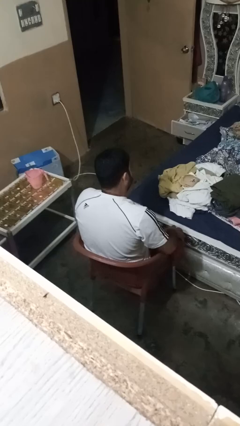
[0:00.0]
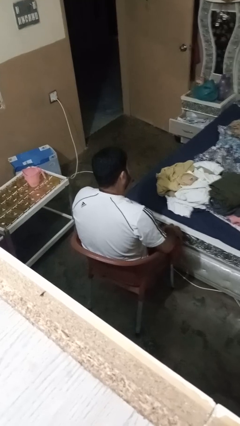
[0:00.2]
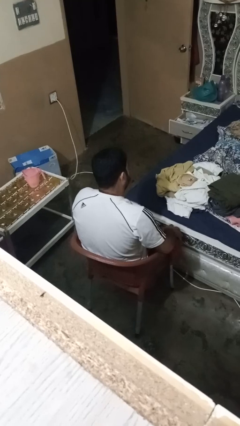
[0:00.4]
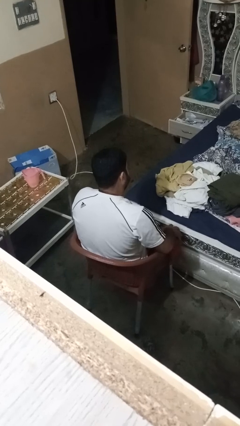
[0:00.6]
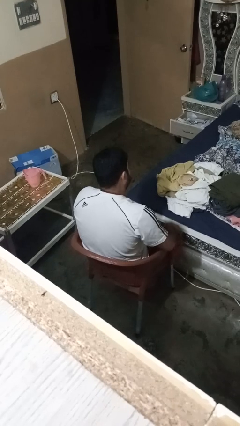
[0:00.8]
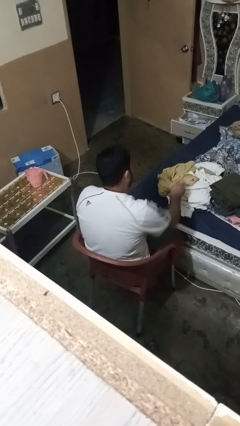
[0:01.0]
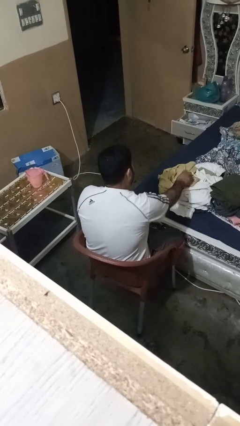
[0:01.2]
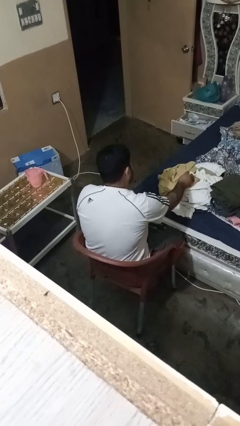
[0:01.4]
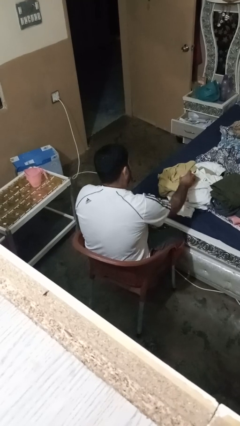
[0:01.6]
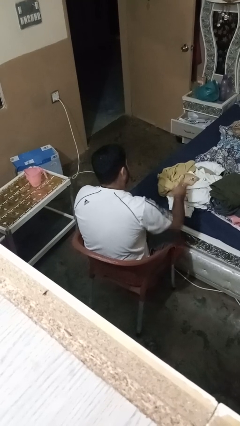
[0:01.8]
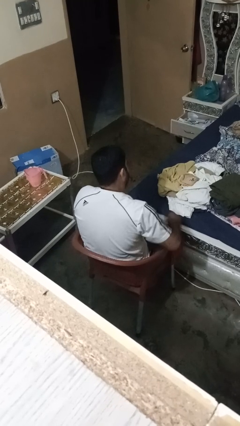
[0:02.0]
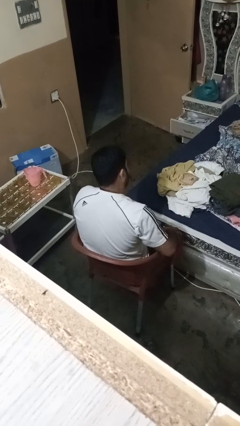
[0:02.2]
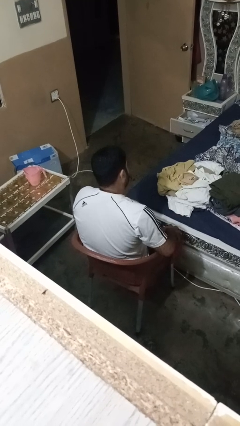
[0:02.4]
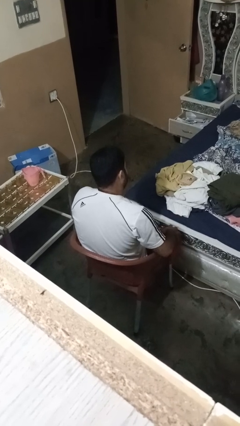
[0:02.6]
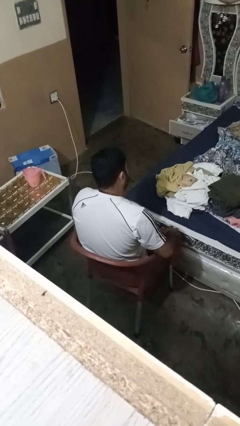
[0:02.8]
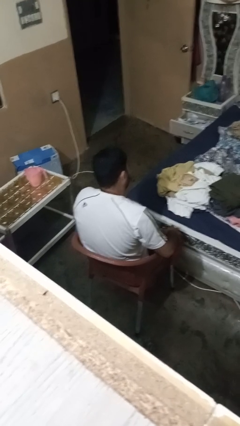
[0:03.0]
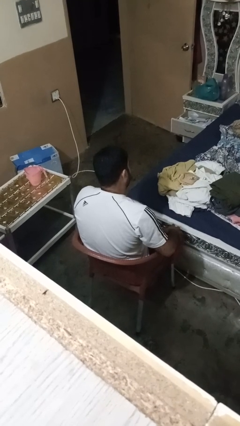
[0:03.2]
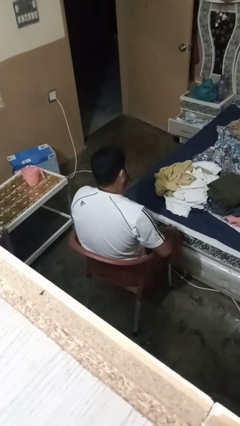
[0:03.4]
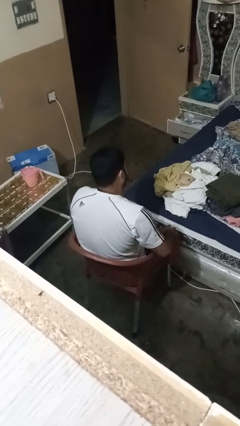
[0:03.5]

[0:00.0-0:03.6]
person folds socks

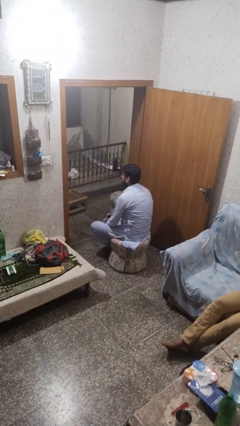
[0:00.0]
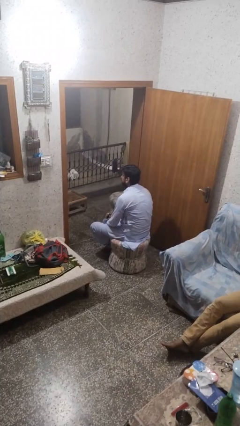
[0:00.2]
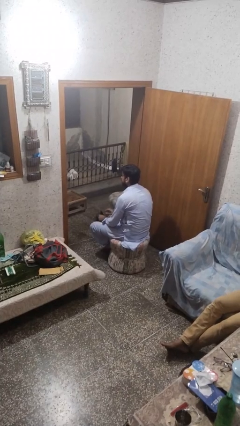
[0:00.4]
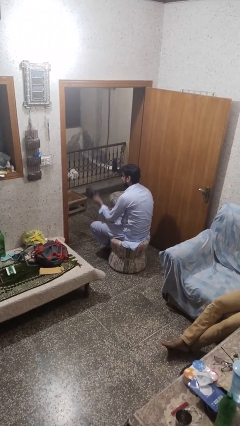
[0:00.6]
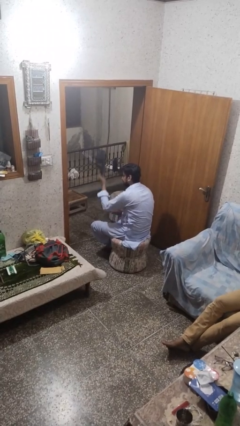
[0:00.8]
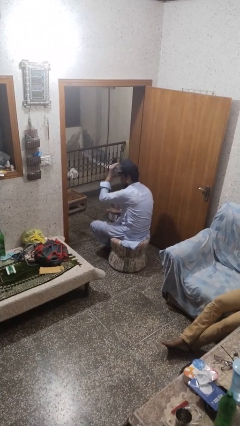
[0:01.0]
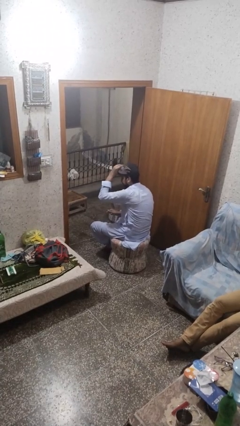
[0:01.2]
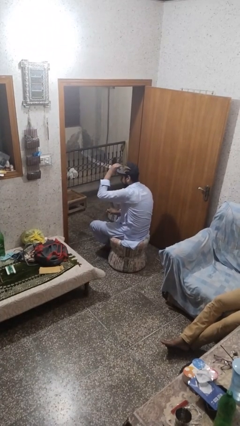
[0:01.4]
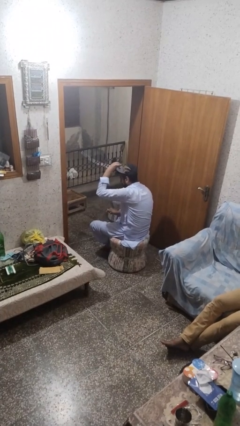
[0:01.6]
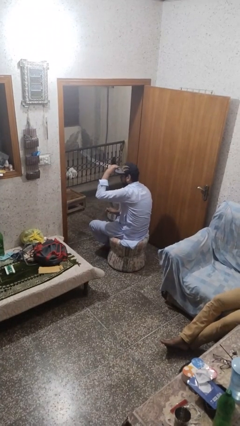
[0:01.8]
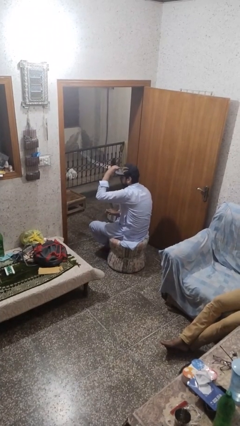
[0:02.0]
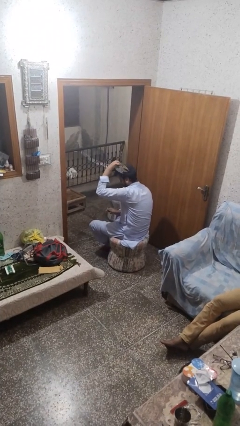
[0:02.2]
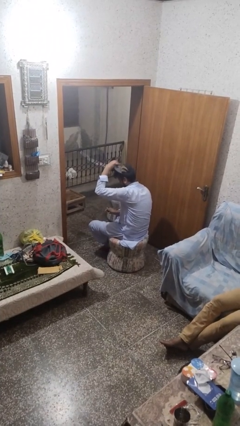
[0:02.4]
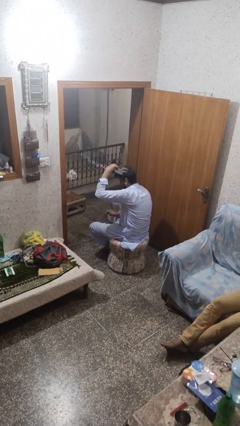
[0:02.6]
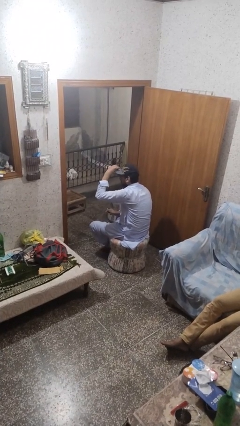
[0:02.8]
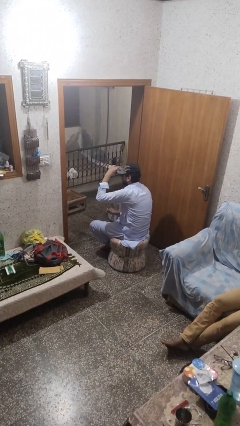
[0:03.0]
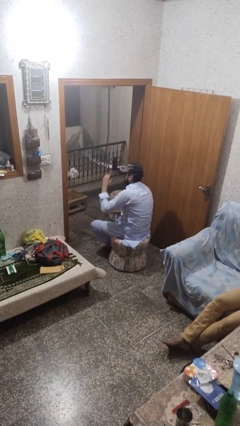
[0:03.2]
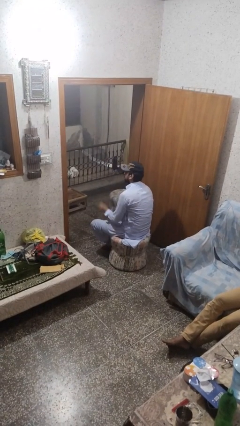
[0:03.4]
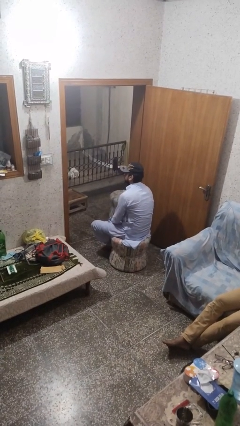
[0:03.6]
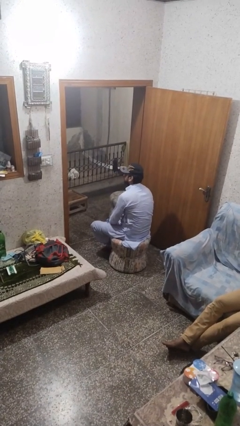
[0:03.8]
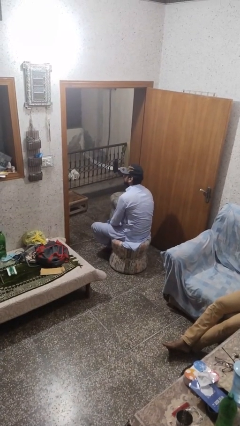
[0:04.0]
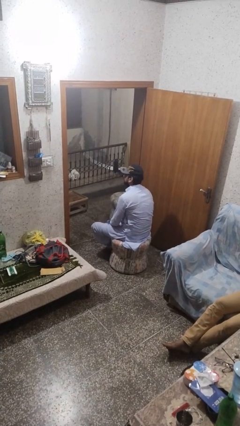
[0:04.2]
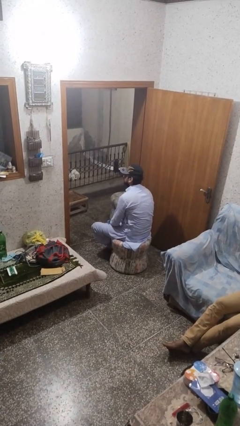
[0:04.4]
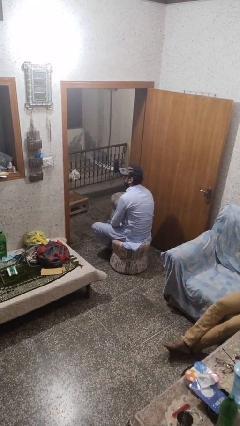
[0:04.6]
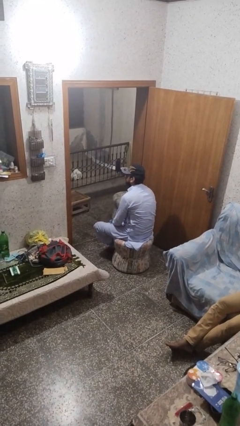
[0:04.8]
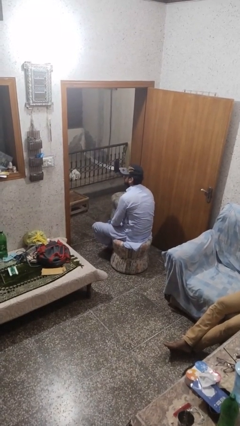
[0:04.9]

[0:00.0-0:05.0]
person puts on hat

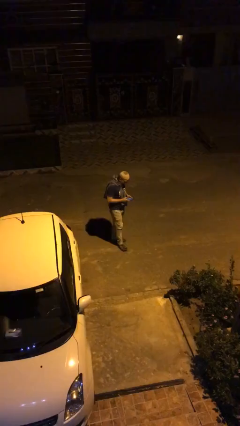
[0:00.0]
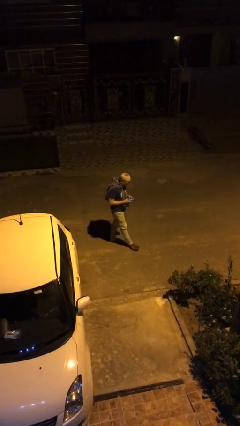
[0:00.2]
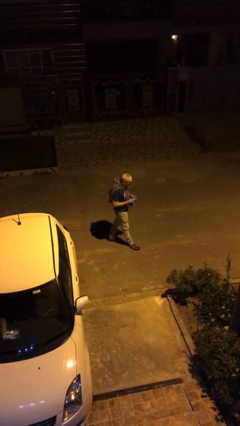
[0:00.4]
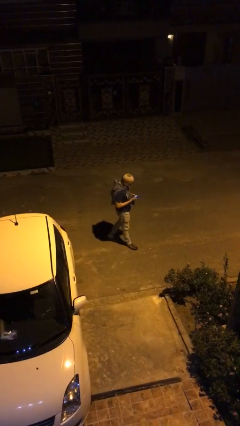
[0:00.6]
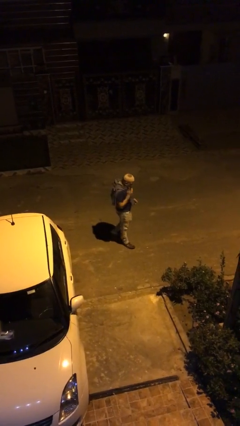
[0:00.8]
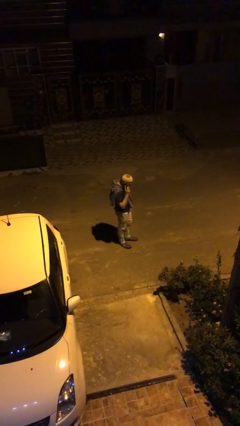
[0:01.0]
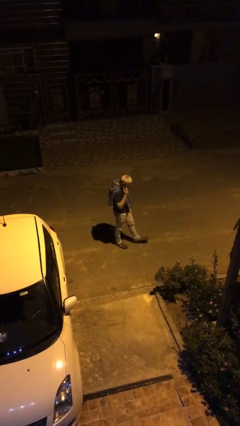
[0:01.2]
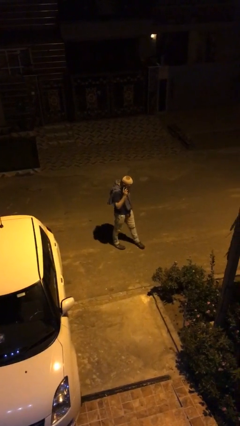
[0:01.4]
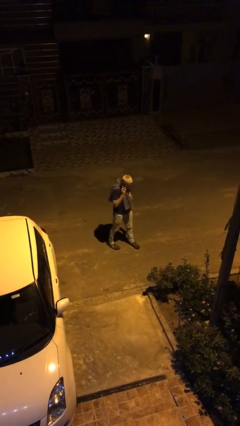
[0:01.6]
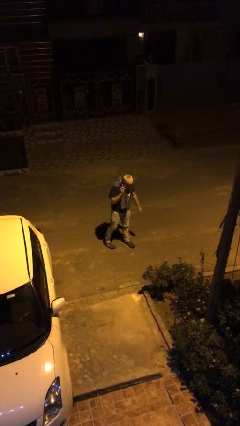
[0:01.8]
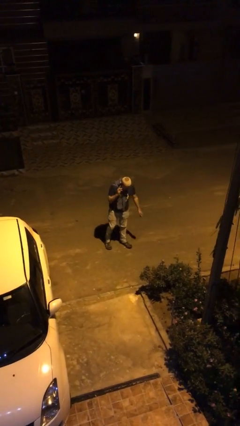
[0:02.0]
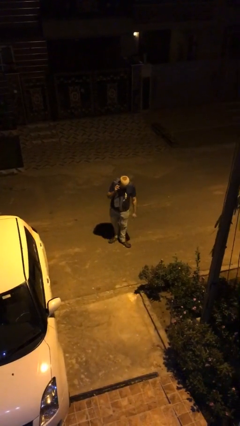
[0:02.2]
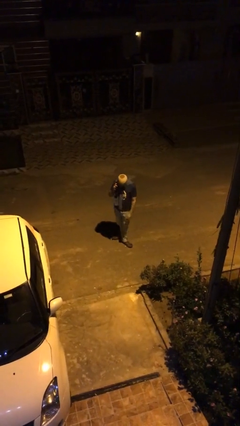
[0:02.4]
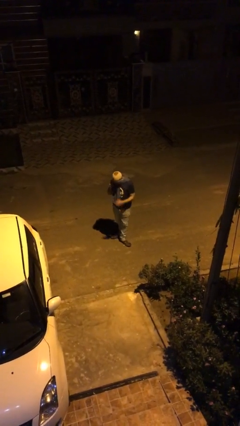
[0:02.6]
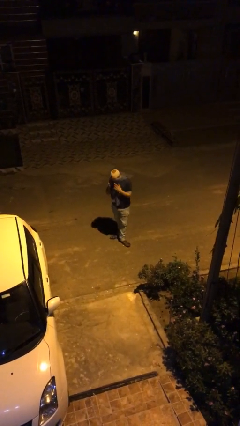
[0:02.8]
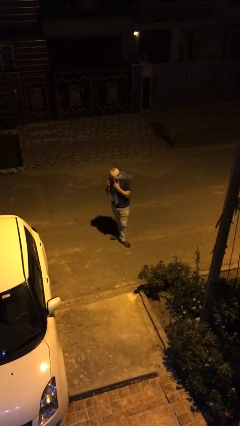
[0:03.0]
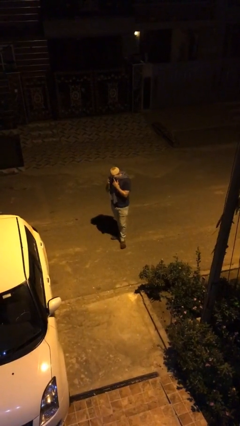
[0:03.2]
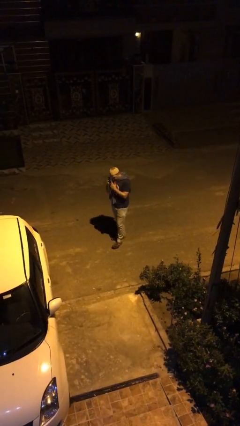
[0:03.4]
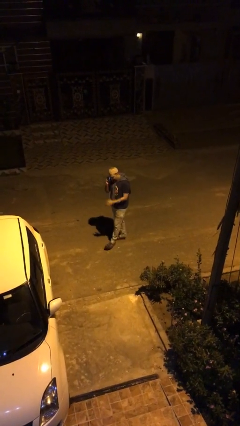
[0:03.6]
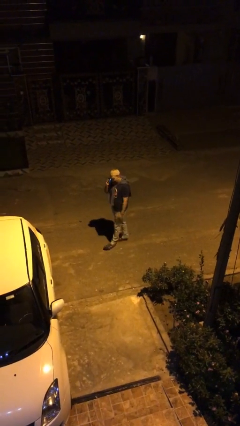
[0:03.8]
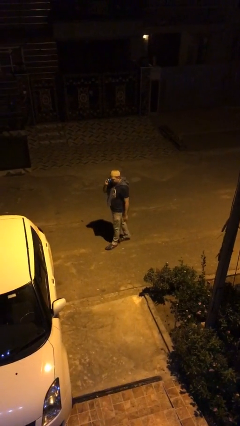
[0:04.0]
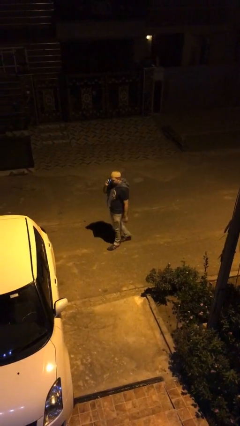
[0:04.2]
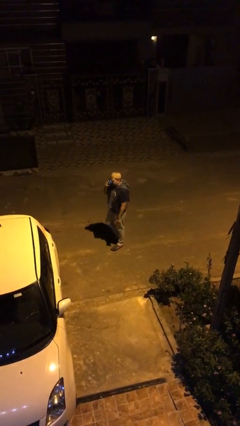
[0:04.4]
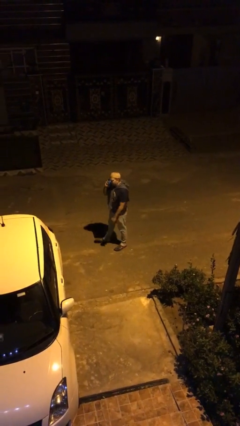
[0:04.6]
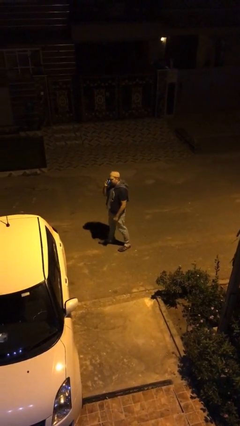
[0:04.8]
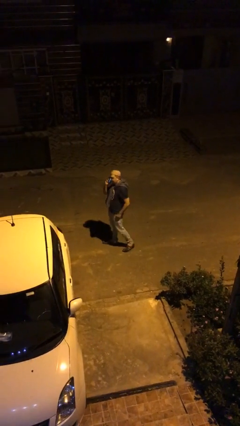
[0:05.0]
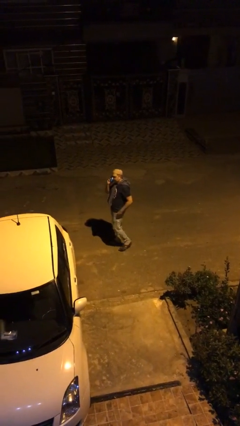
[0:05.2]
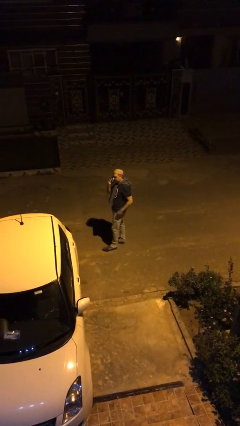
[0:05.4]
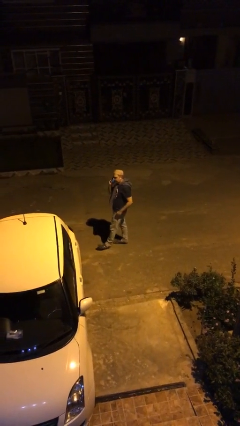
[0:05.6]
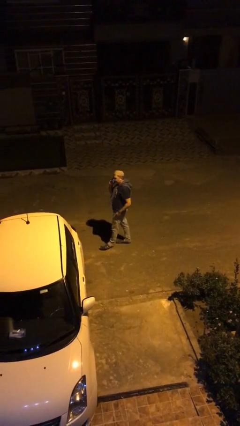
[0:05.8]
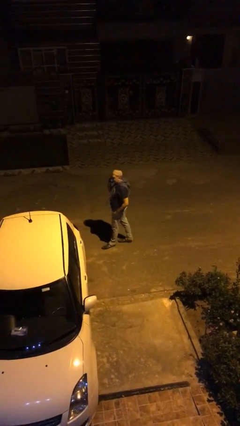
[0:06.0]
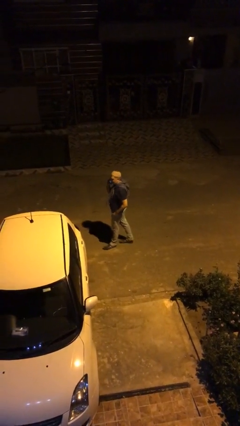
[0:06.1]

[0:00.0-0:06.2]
person talks on phone

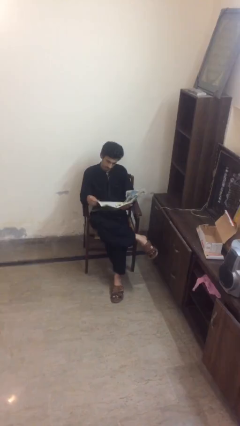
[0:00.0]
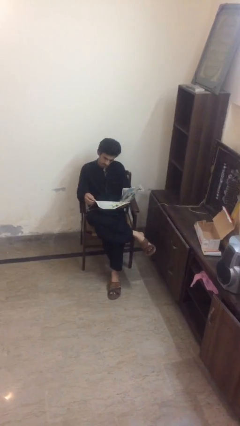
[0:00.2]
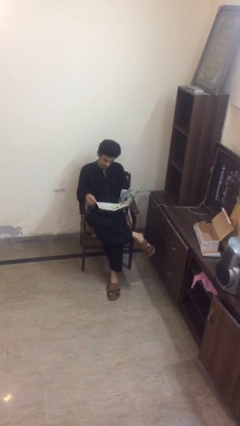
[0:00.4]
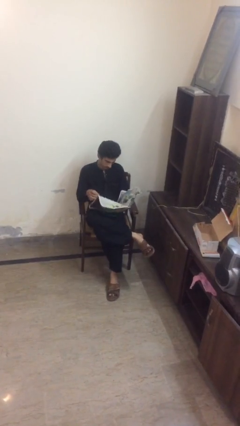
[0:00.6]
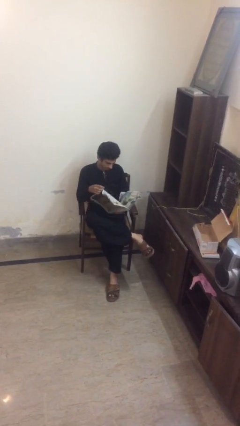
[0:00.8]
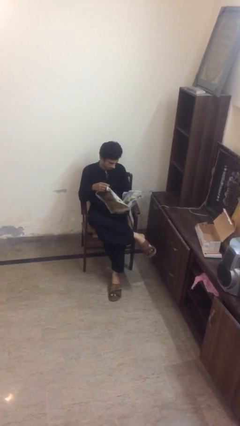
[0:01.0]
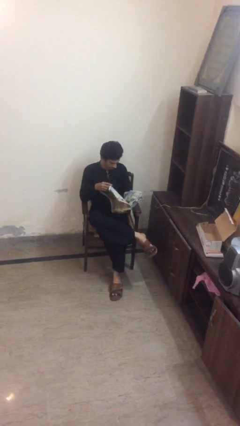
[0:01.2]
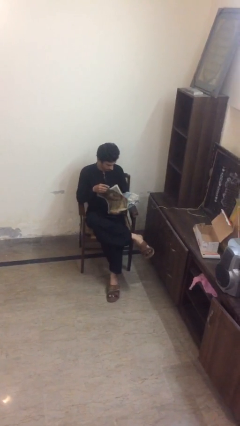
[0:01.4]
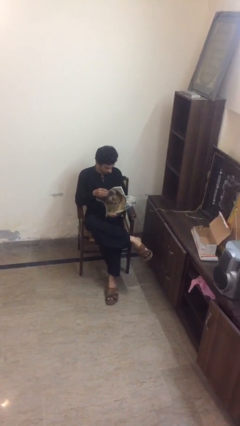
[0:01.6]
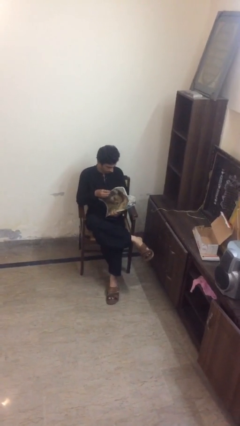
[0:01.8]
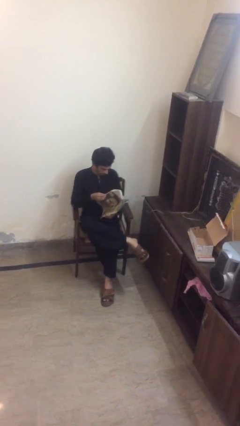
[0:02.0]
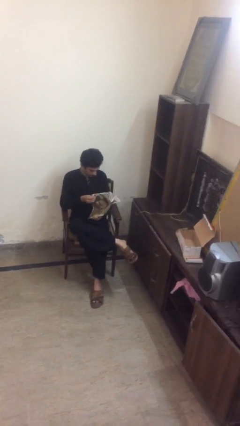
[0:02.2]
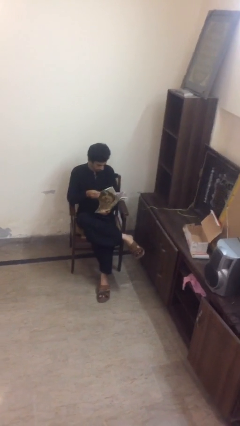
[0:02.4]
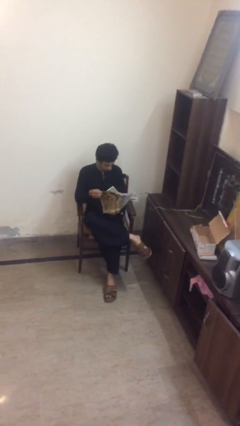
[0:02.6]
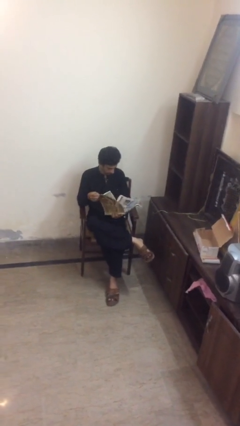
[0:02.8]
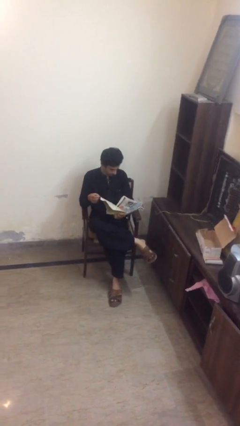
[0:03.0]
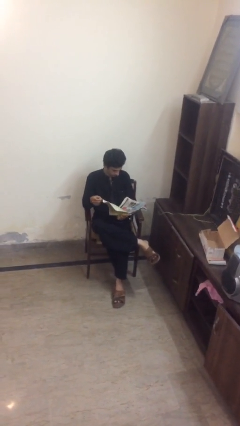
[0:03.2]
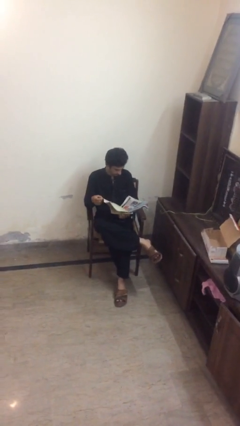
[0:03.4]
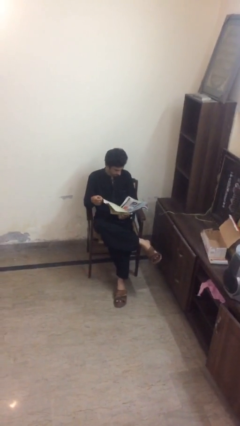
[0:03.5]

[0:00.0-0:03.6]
person reads document
